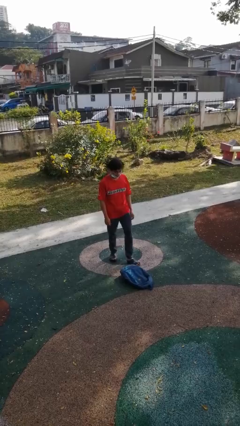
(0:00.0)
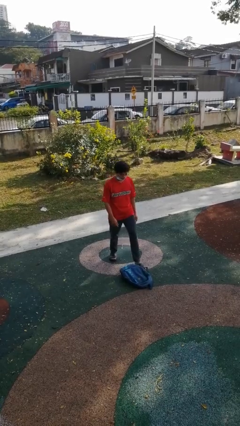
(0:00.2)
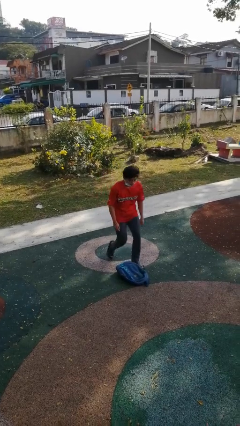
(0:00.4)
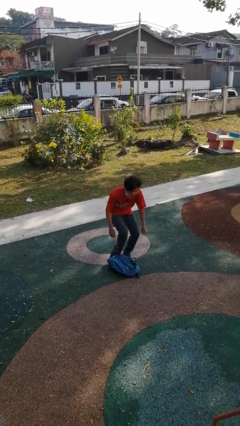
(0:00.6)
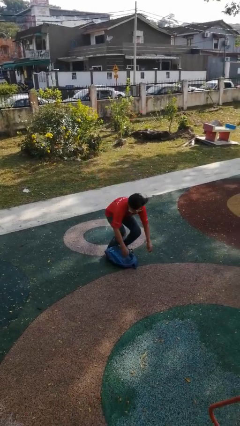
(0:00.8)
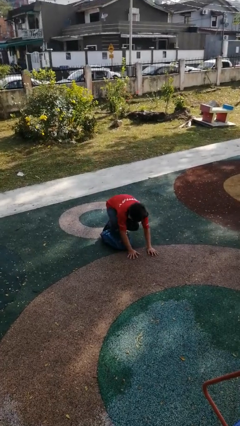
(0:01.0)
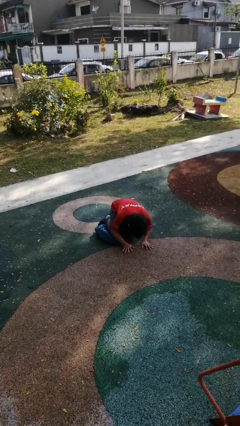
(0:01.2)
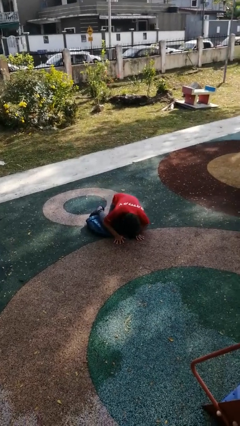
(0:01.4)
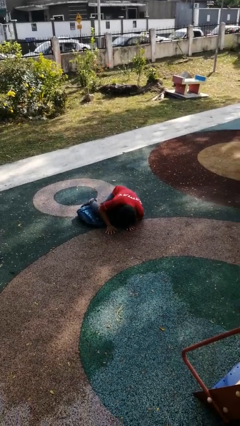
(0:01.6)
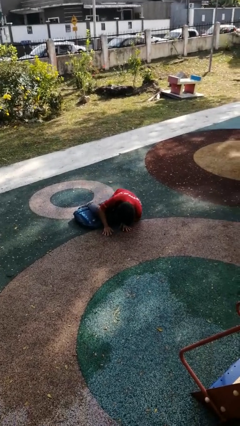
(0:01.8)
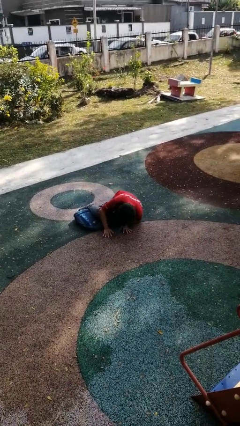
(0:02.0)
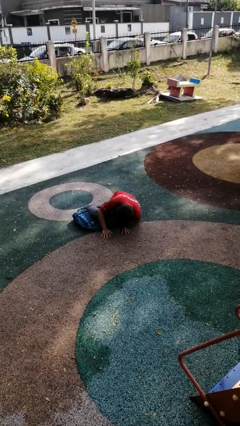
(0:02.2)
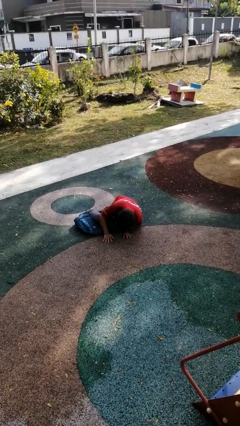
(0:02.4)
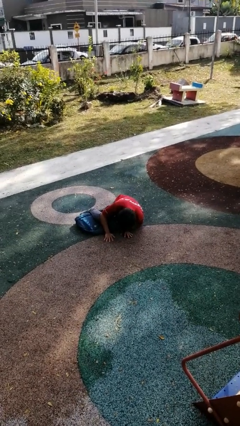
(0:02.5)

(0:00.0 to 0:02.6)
person trips on object on floor

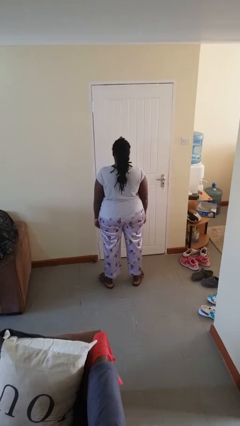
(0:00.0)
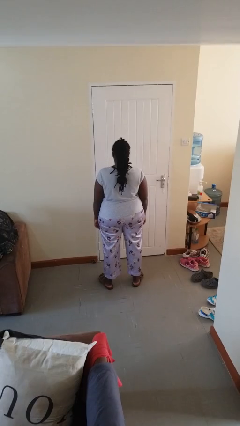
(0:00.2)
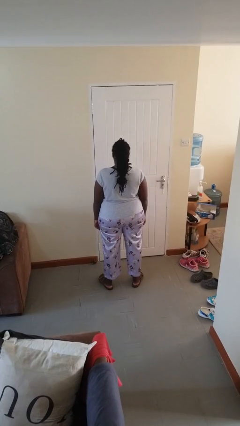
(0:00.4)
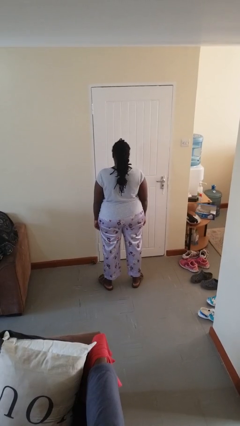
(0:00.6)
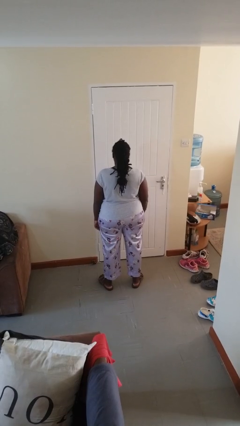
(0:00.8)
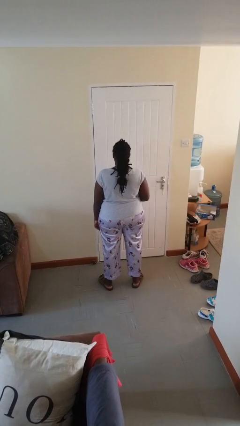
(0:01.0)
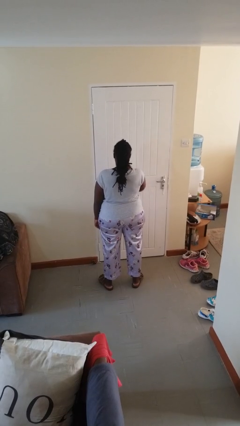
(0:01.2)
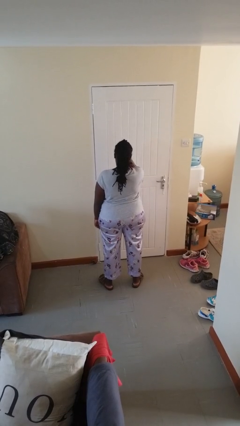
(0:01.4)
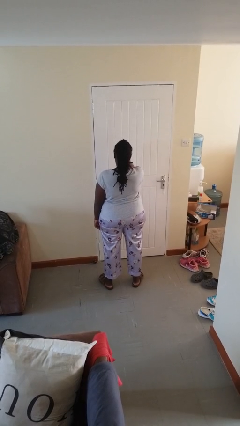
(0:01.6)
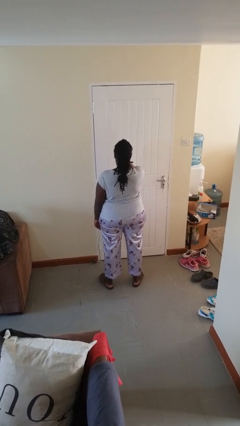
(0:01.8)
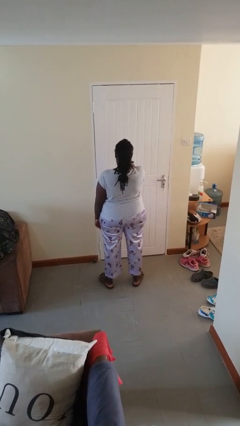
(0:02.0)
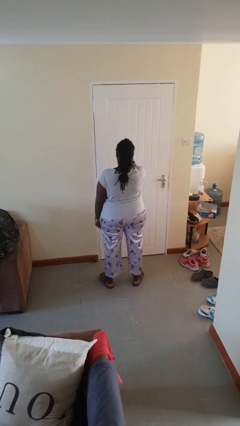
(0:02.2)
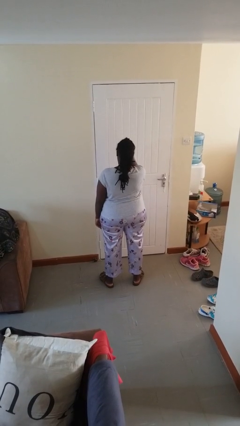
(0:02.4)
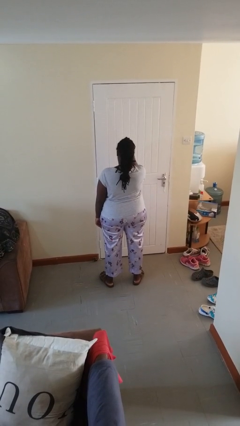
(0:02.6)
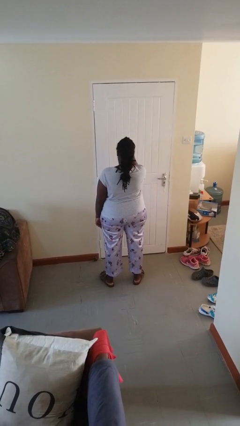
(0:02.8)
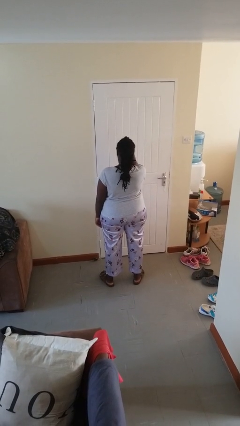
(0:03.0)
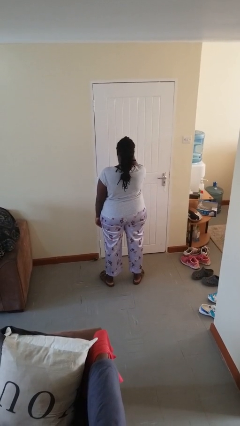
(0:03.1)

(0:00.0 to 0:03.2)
person scratches face

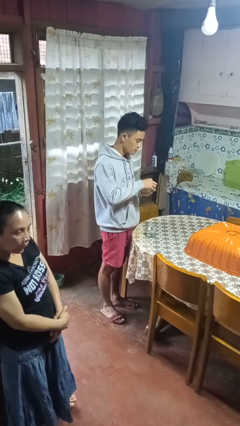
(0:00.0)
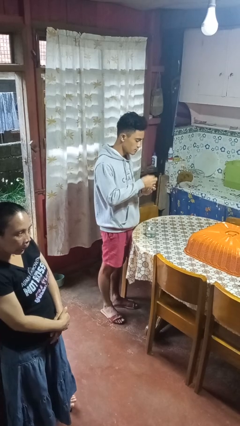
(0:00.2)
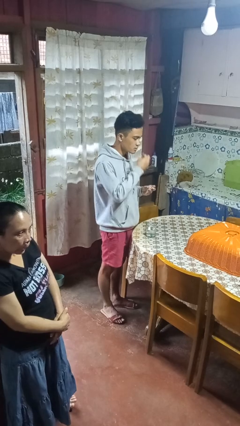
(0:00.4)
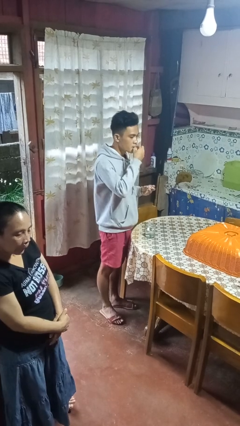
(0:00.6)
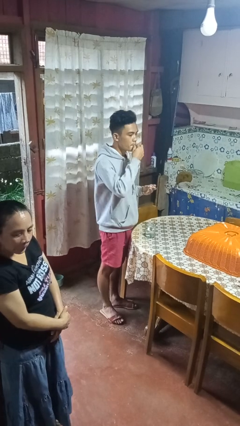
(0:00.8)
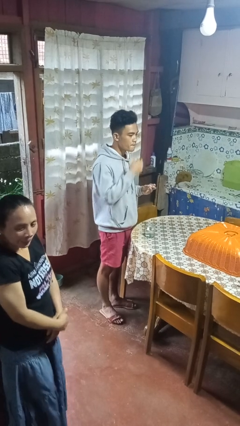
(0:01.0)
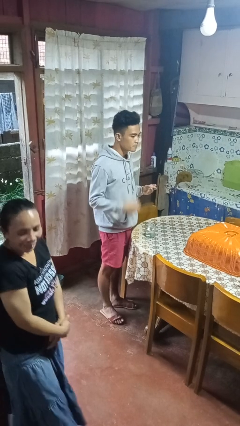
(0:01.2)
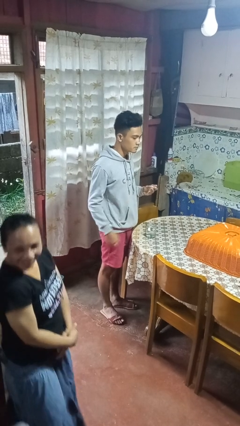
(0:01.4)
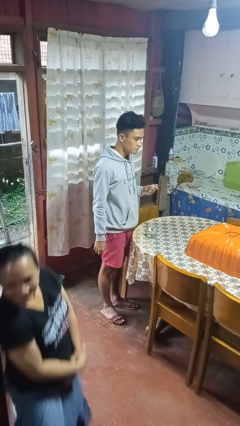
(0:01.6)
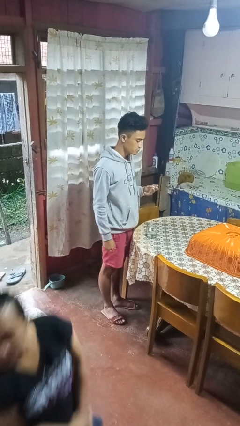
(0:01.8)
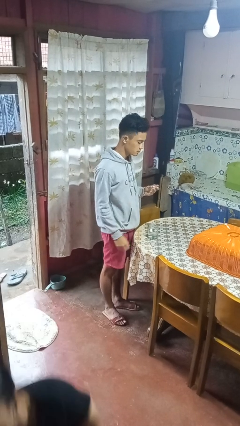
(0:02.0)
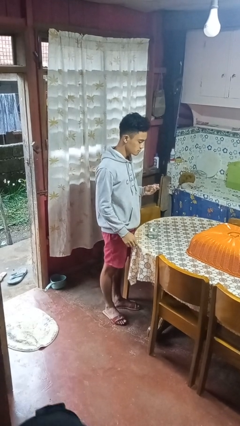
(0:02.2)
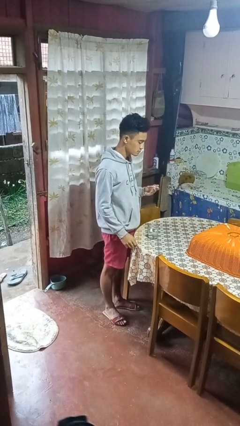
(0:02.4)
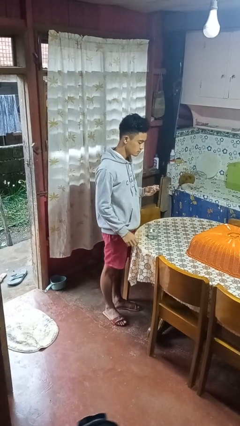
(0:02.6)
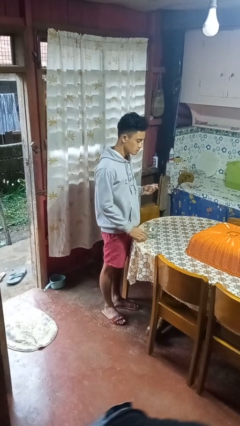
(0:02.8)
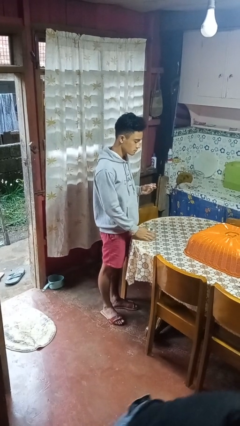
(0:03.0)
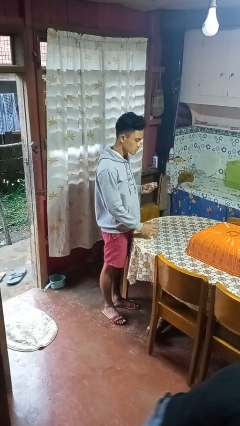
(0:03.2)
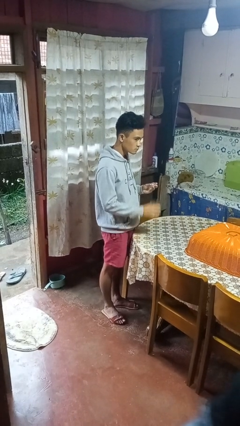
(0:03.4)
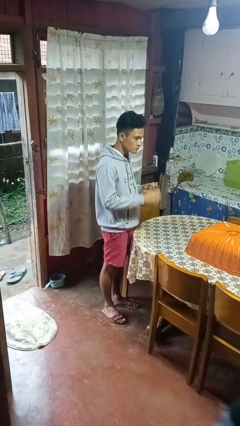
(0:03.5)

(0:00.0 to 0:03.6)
person takes medicine pills

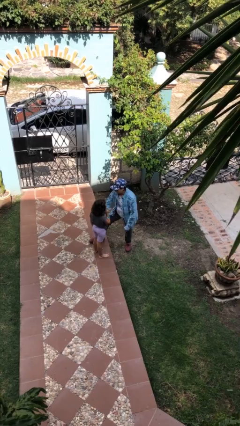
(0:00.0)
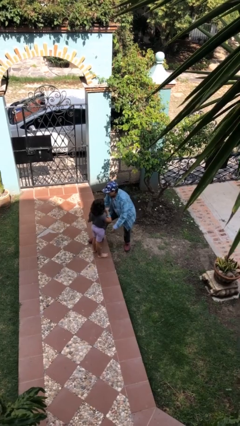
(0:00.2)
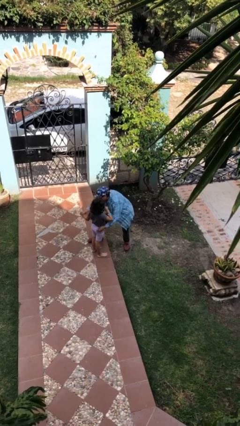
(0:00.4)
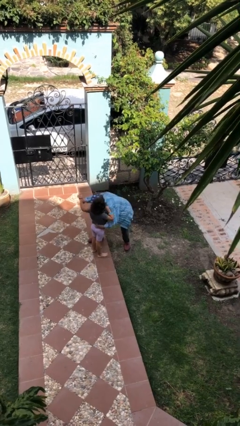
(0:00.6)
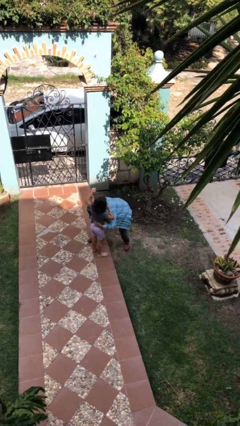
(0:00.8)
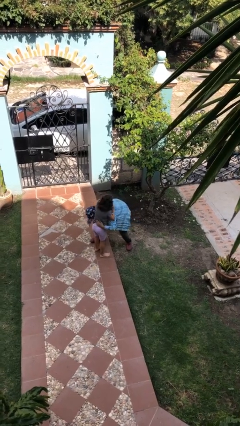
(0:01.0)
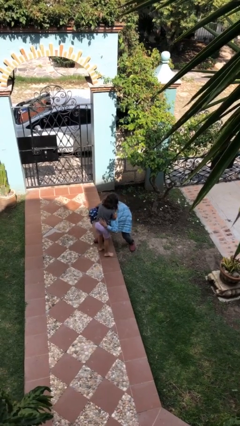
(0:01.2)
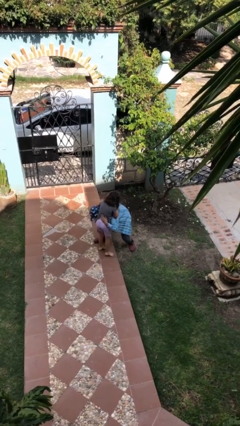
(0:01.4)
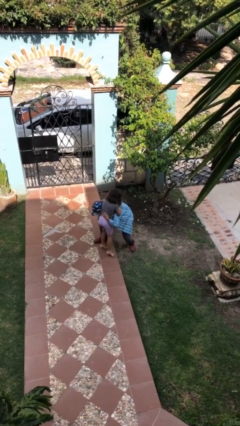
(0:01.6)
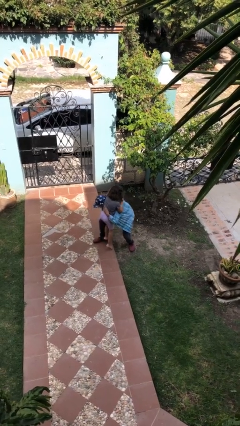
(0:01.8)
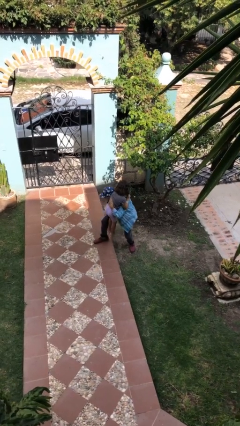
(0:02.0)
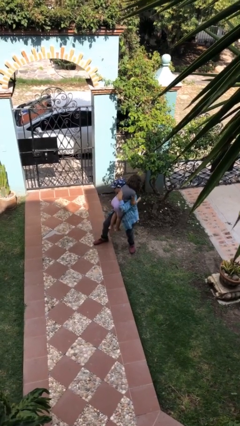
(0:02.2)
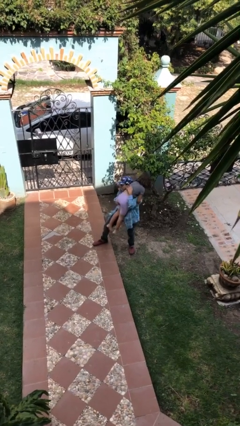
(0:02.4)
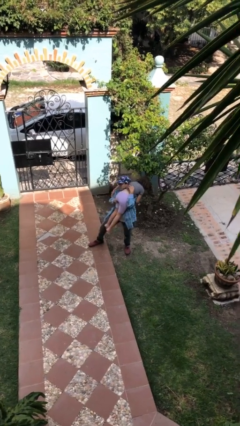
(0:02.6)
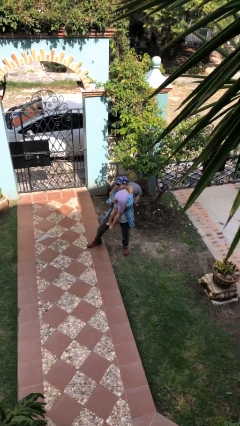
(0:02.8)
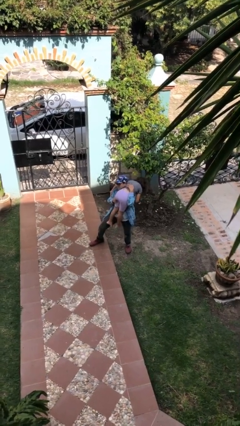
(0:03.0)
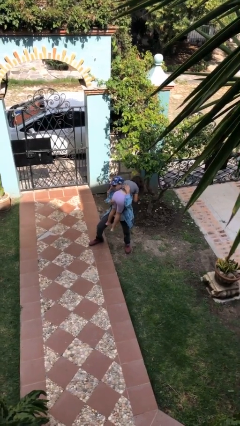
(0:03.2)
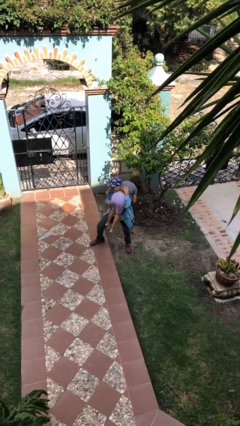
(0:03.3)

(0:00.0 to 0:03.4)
person carries person over shoulder

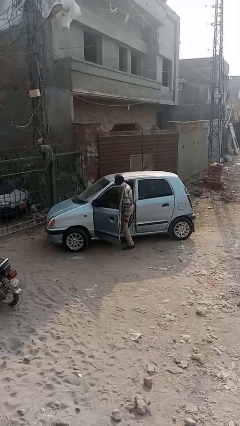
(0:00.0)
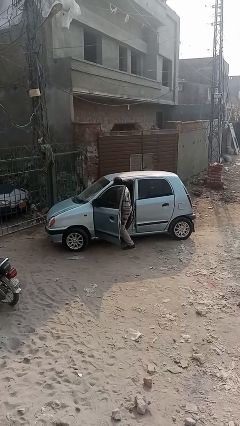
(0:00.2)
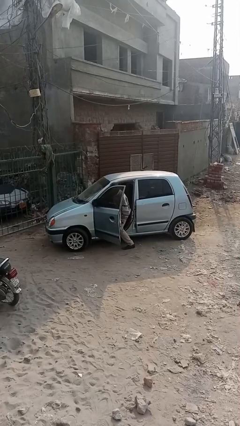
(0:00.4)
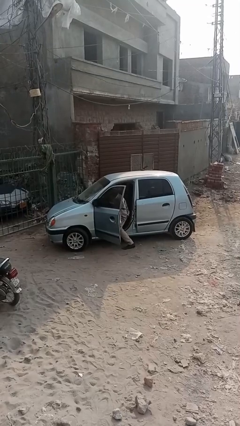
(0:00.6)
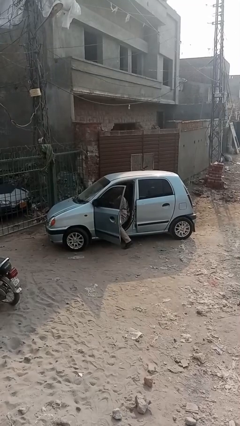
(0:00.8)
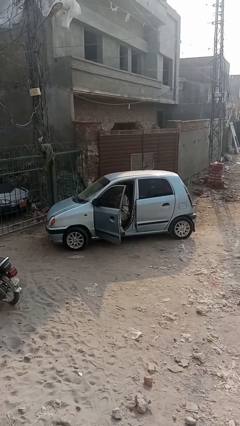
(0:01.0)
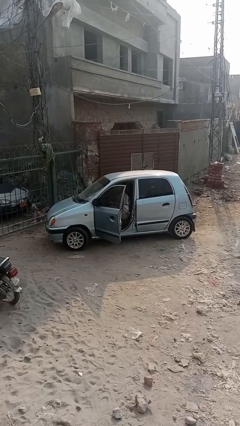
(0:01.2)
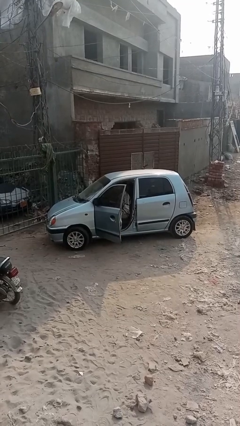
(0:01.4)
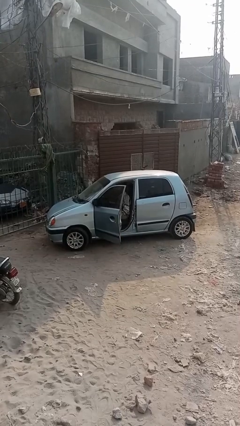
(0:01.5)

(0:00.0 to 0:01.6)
person enters car

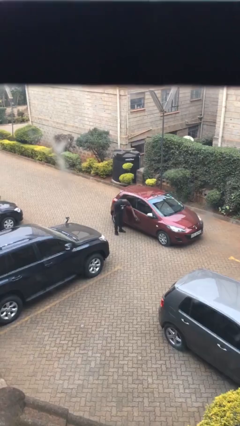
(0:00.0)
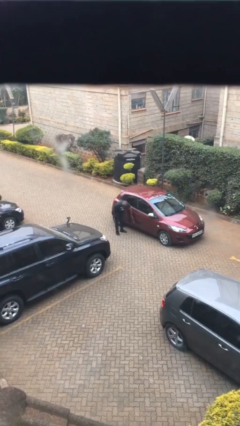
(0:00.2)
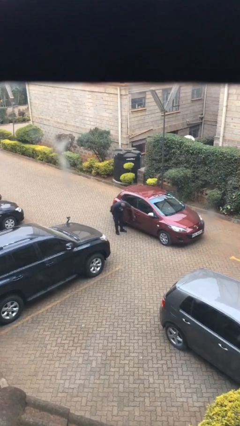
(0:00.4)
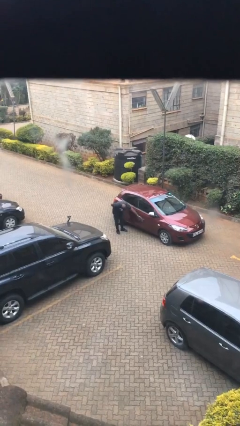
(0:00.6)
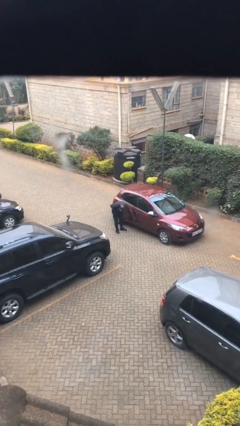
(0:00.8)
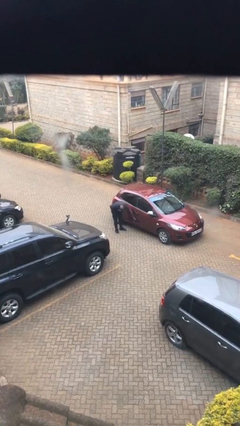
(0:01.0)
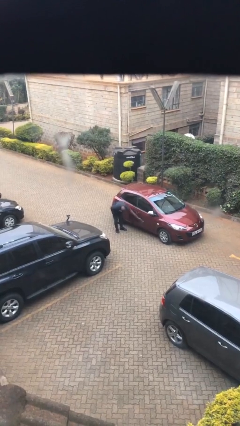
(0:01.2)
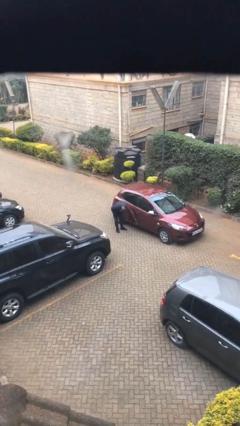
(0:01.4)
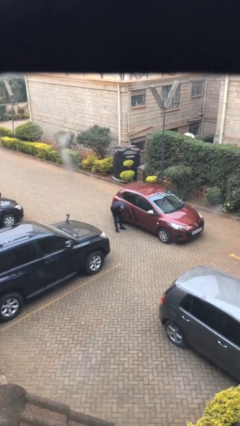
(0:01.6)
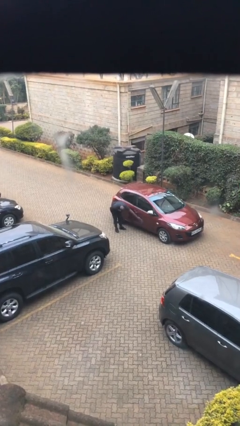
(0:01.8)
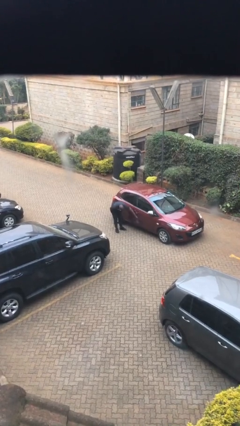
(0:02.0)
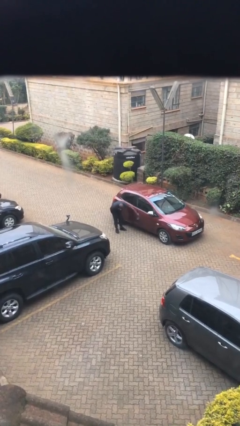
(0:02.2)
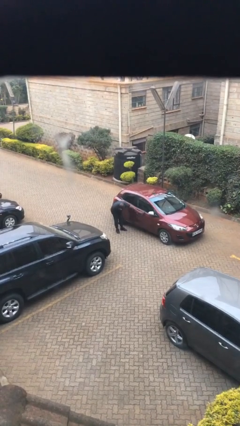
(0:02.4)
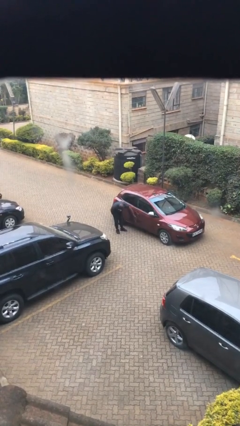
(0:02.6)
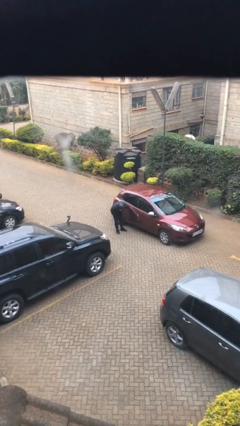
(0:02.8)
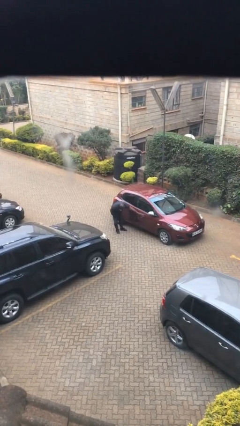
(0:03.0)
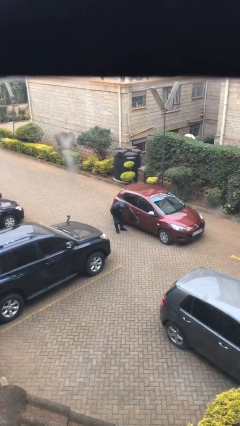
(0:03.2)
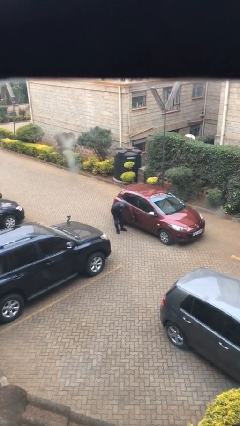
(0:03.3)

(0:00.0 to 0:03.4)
person polishes car with rag
